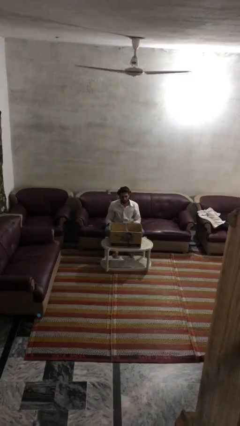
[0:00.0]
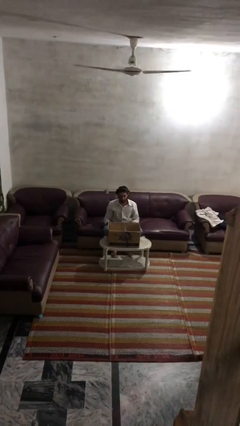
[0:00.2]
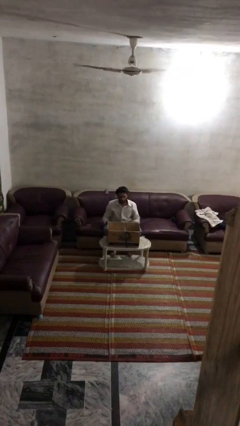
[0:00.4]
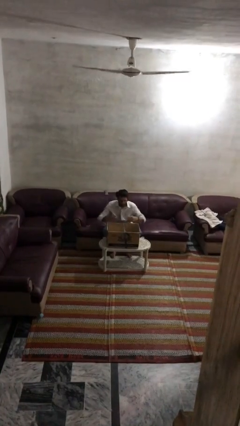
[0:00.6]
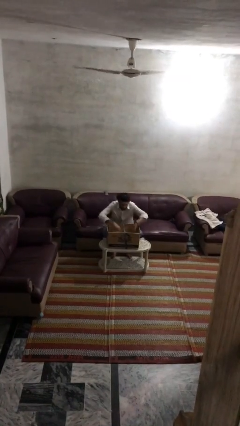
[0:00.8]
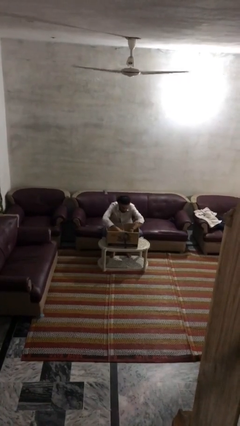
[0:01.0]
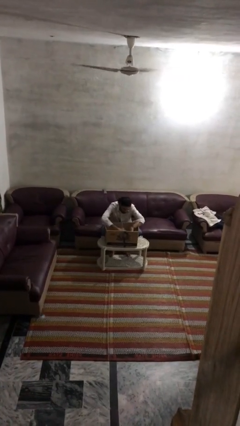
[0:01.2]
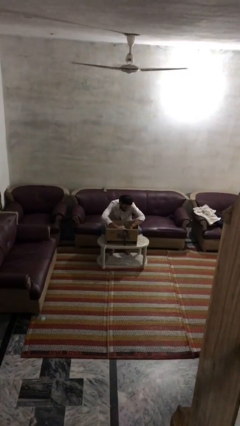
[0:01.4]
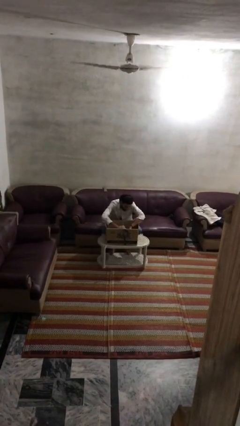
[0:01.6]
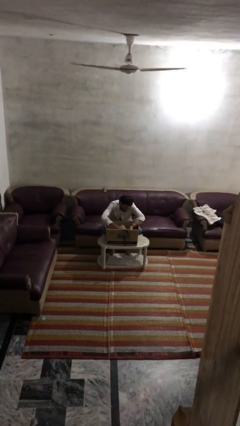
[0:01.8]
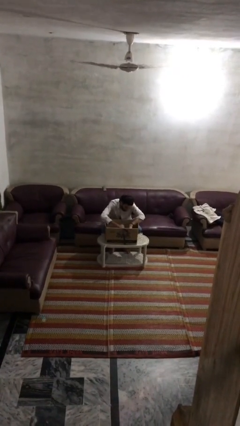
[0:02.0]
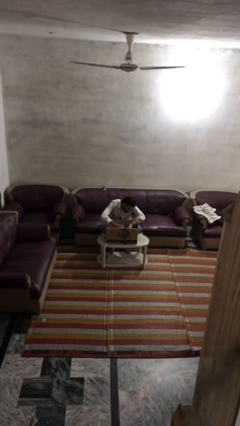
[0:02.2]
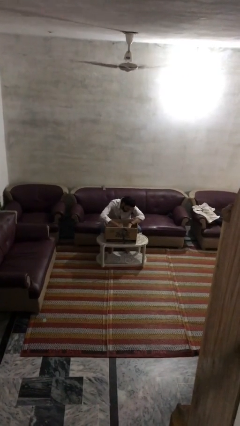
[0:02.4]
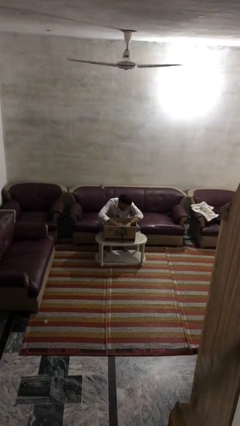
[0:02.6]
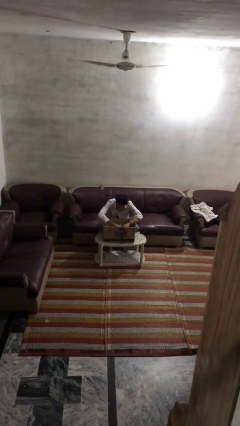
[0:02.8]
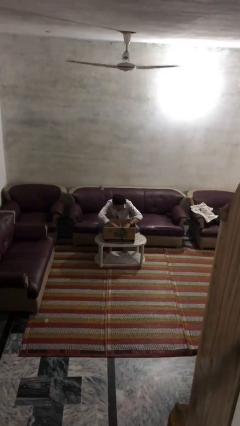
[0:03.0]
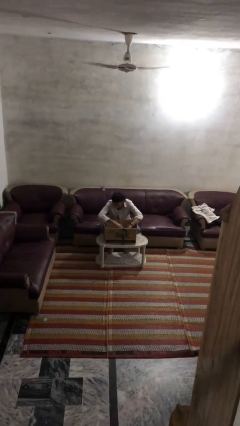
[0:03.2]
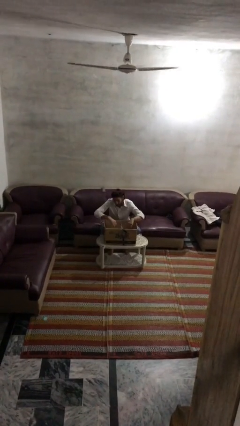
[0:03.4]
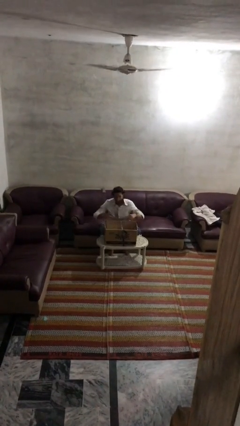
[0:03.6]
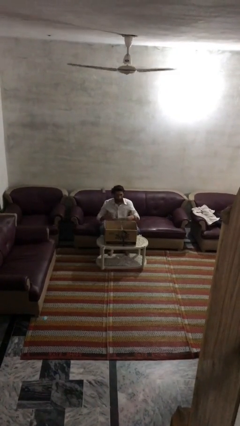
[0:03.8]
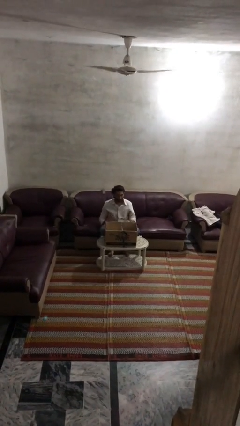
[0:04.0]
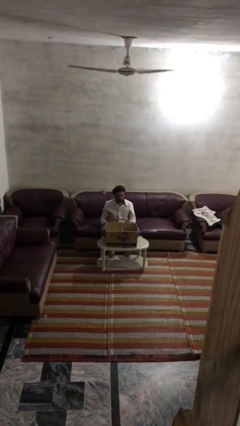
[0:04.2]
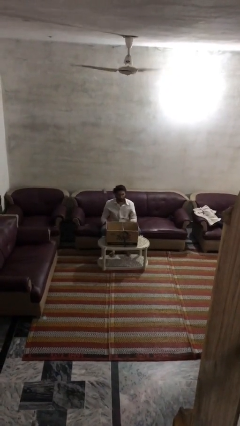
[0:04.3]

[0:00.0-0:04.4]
person searches in box

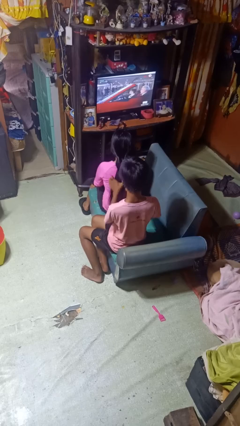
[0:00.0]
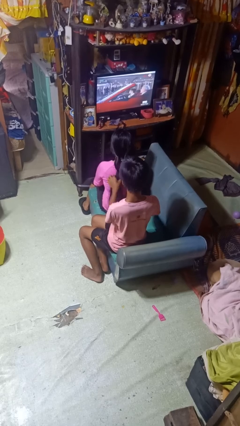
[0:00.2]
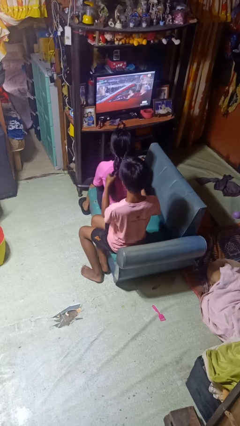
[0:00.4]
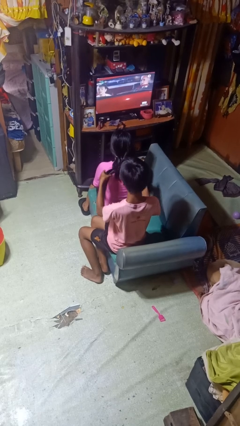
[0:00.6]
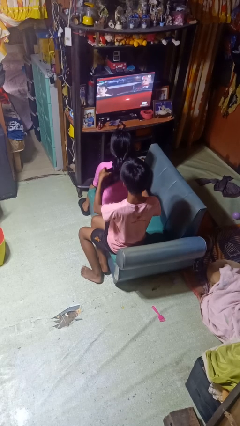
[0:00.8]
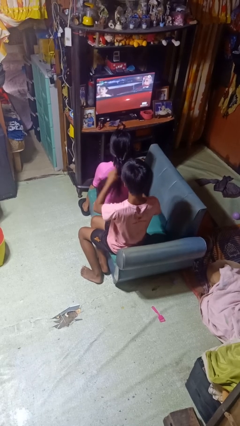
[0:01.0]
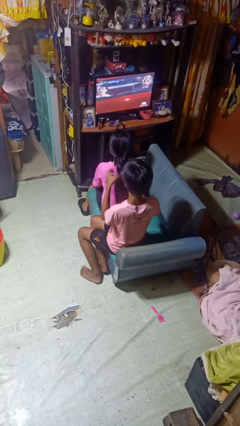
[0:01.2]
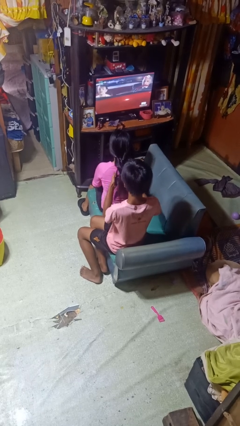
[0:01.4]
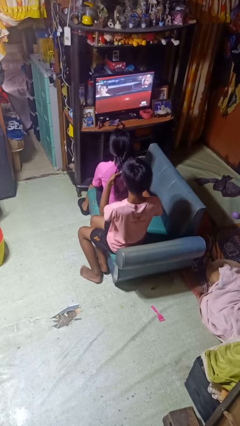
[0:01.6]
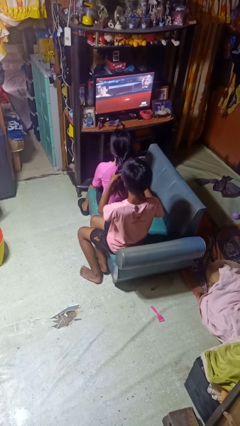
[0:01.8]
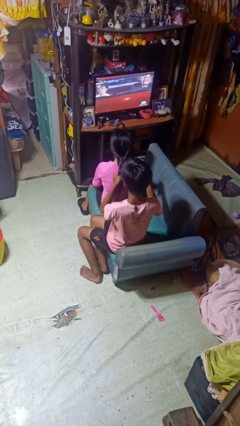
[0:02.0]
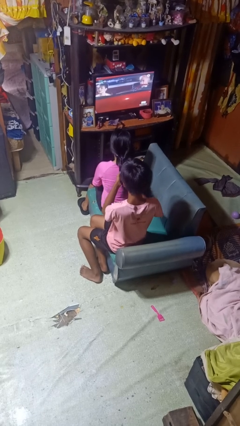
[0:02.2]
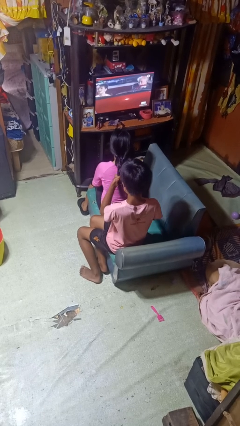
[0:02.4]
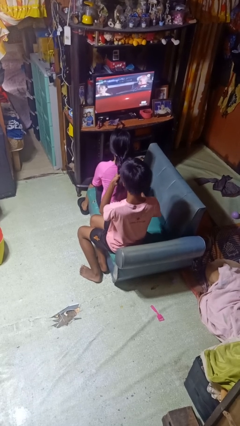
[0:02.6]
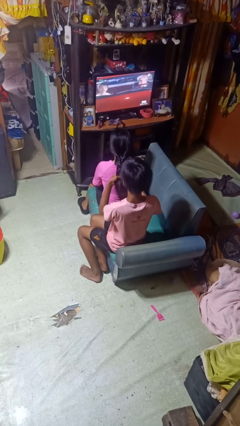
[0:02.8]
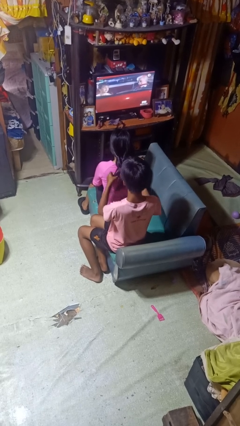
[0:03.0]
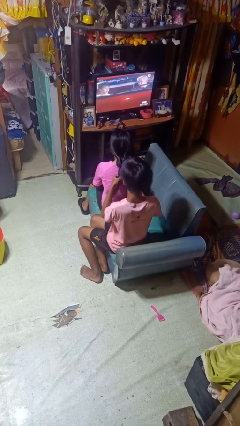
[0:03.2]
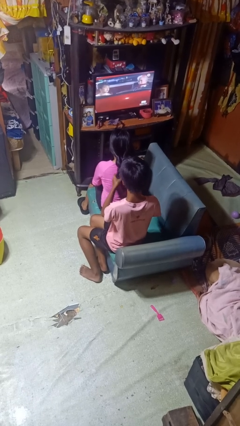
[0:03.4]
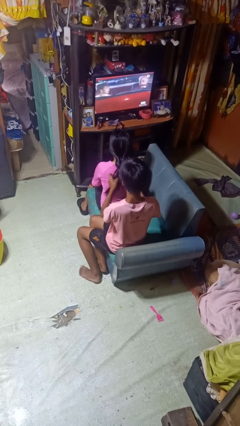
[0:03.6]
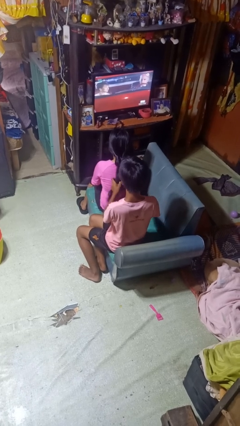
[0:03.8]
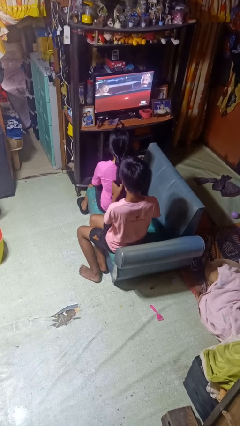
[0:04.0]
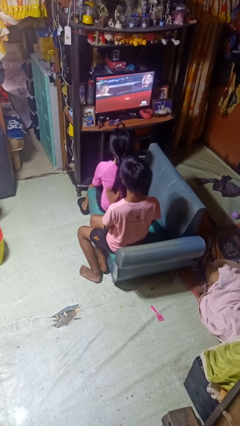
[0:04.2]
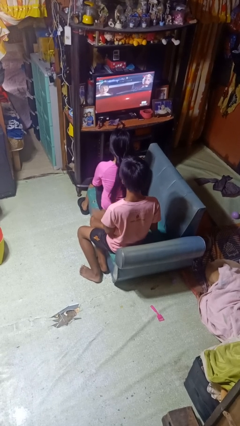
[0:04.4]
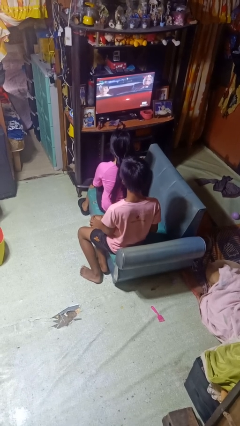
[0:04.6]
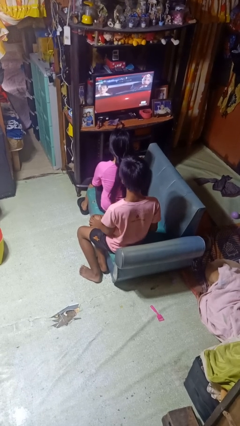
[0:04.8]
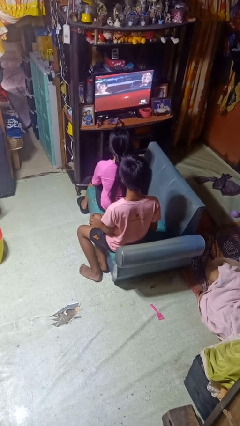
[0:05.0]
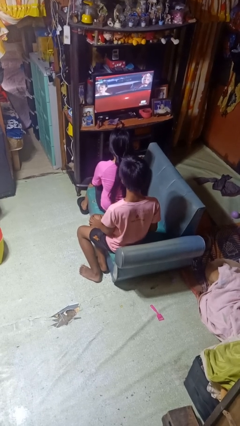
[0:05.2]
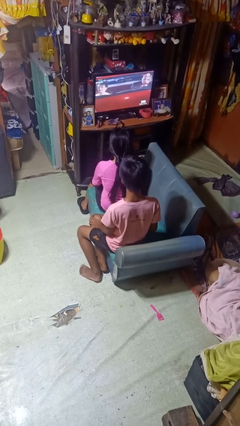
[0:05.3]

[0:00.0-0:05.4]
person braids hair of person

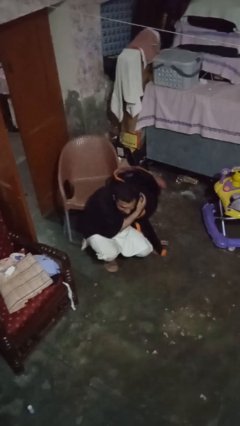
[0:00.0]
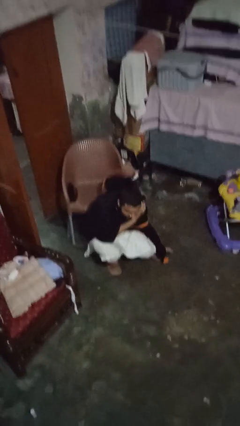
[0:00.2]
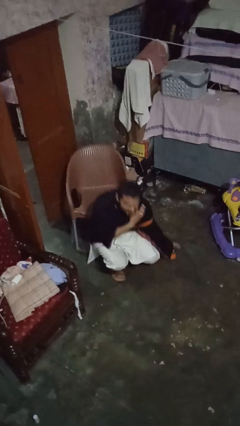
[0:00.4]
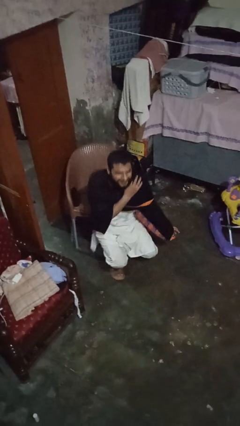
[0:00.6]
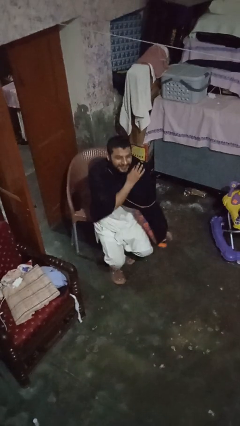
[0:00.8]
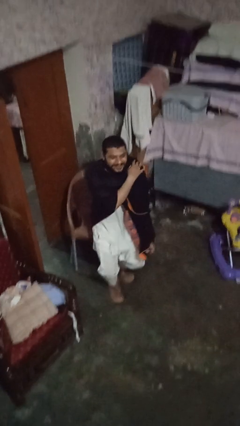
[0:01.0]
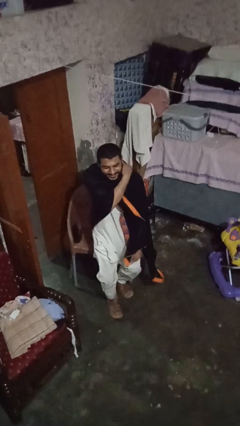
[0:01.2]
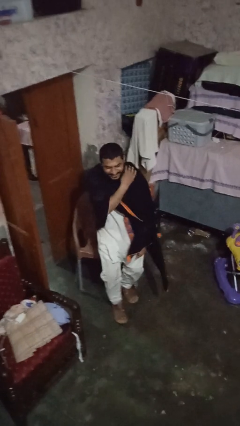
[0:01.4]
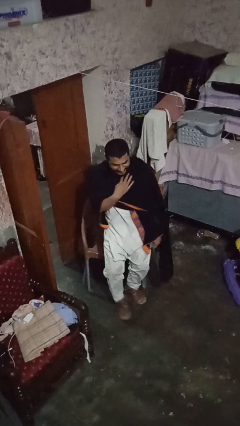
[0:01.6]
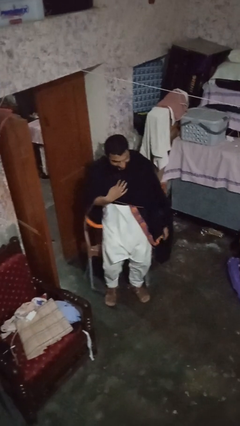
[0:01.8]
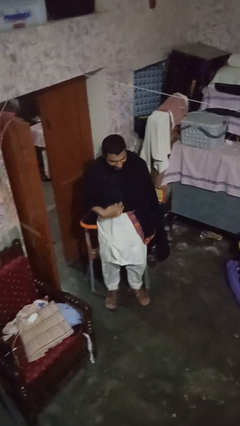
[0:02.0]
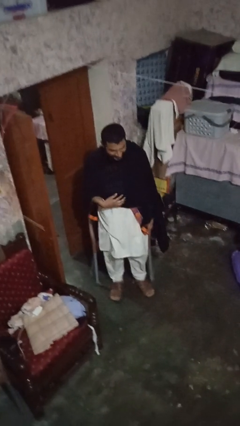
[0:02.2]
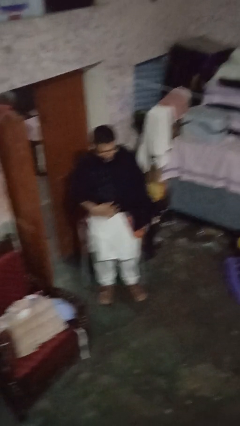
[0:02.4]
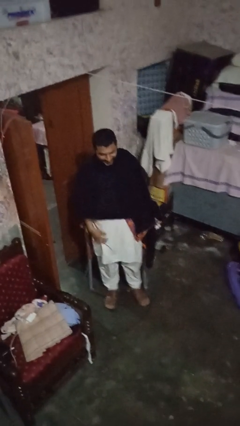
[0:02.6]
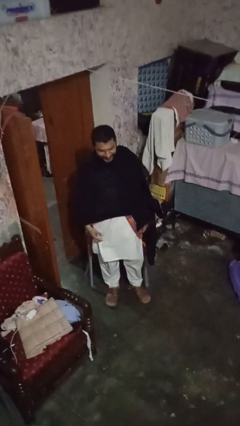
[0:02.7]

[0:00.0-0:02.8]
person stands up from floor

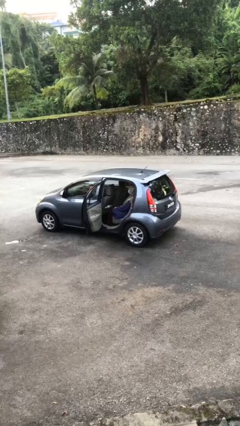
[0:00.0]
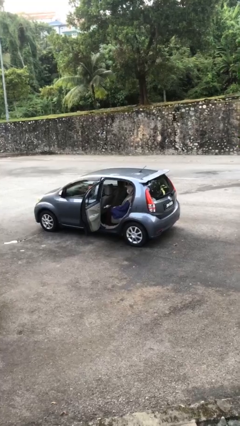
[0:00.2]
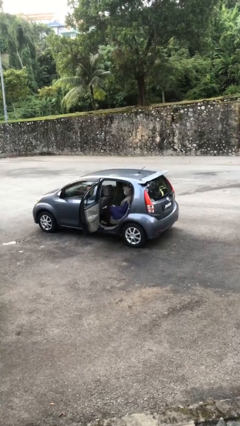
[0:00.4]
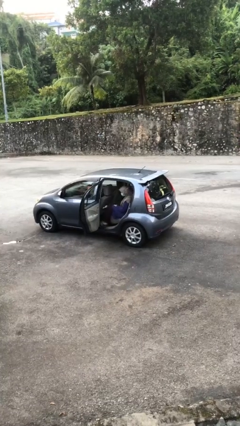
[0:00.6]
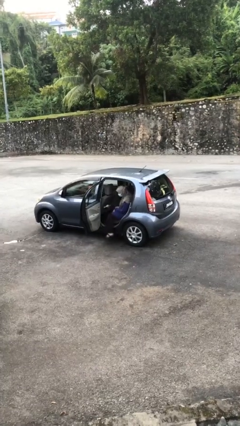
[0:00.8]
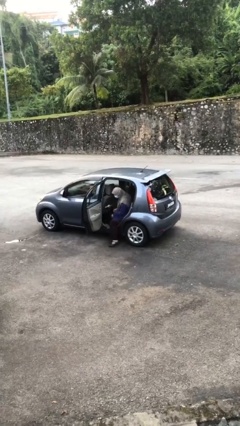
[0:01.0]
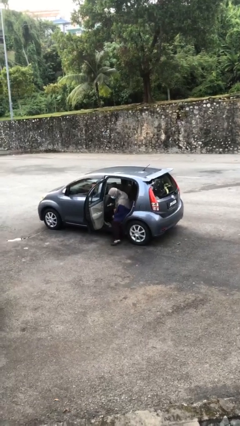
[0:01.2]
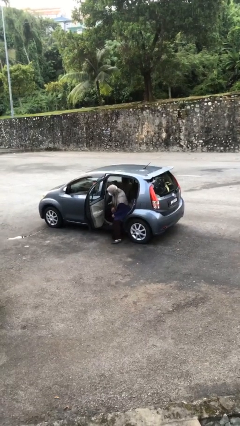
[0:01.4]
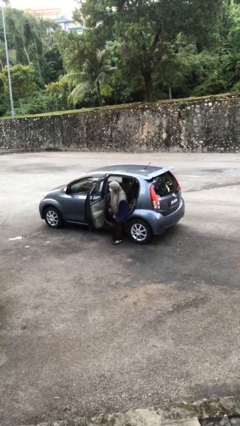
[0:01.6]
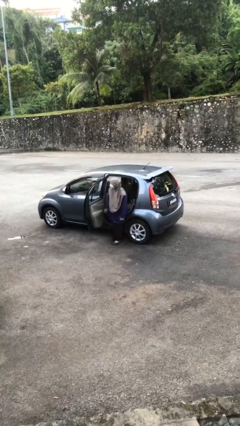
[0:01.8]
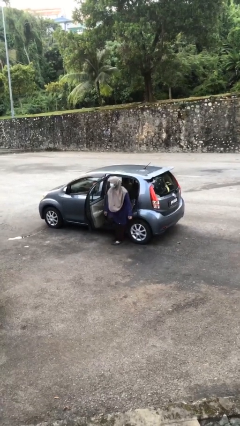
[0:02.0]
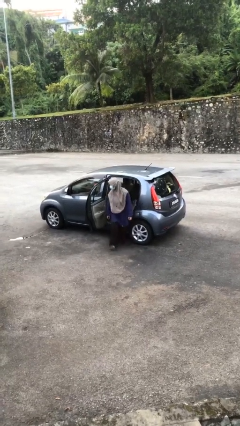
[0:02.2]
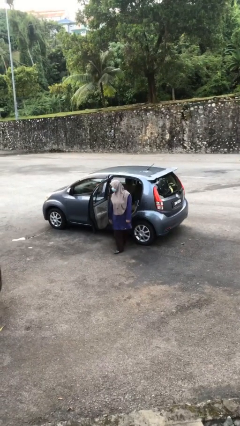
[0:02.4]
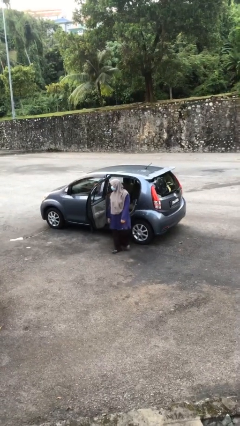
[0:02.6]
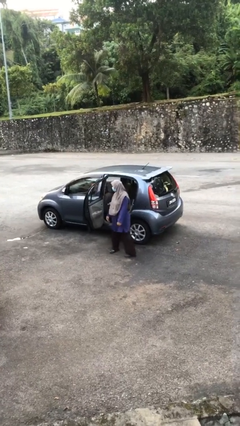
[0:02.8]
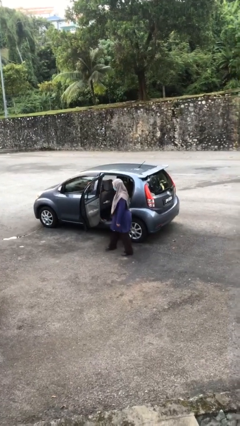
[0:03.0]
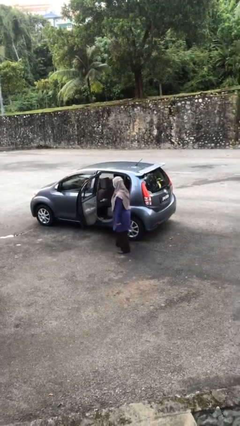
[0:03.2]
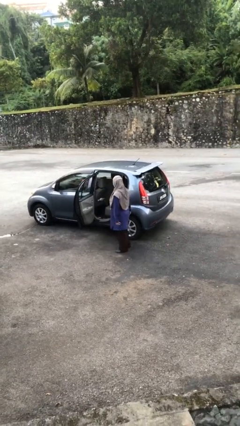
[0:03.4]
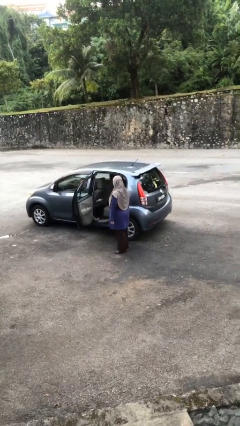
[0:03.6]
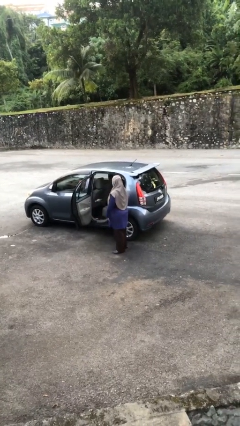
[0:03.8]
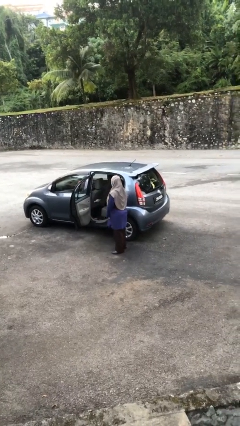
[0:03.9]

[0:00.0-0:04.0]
person exits car

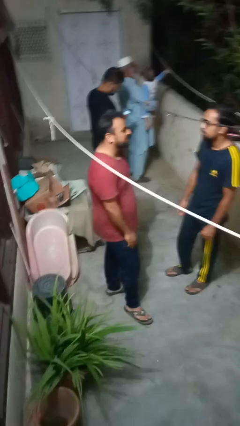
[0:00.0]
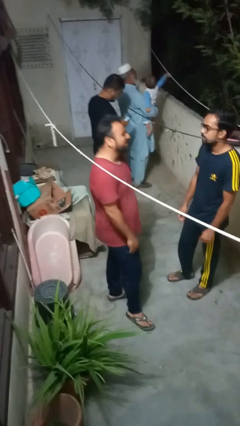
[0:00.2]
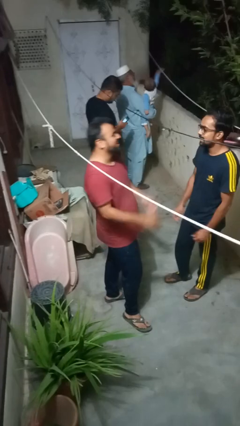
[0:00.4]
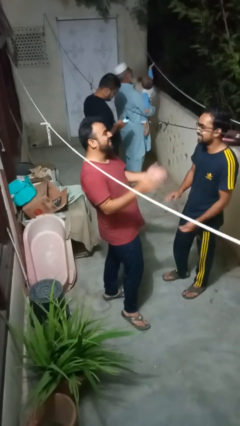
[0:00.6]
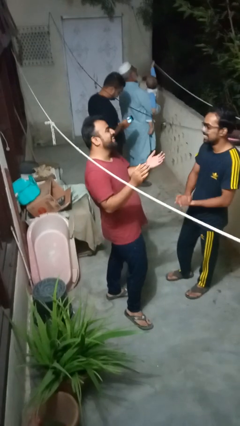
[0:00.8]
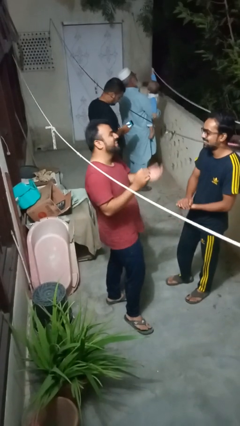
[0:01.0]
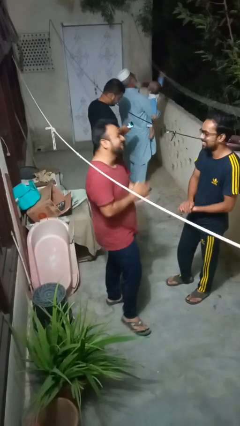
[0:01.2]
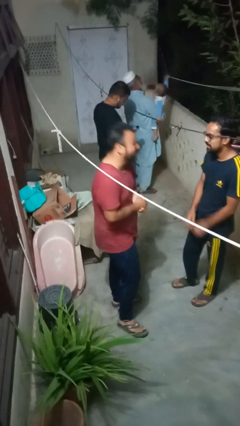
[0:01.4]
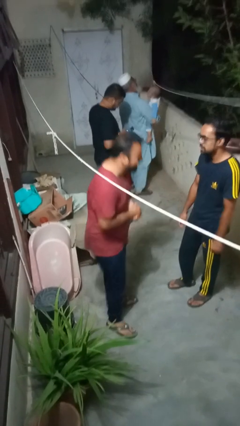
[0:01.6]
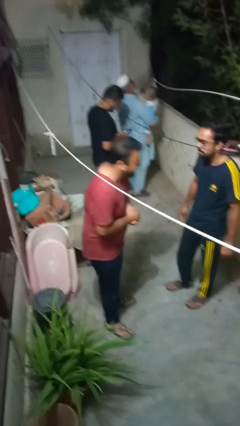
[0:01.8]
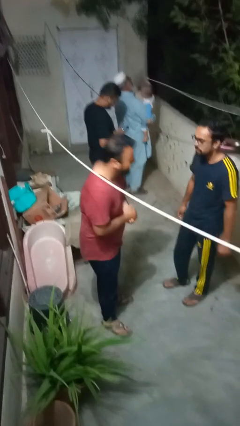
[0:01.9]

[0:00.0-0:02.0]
person laughs with person
